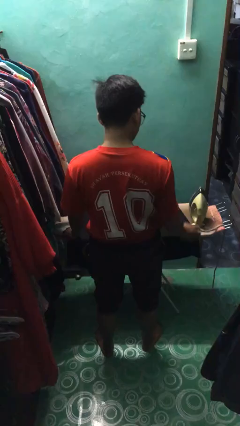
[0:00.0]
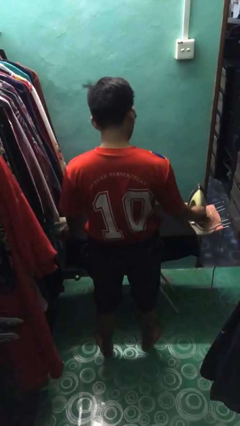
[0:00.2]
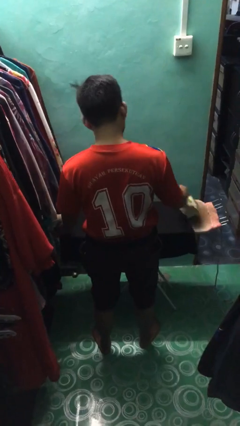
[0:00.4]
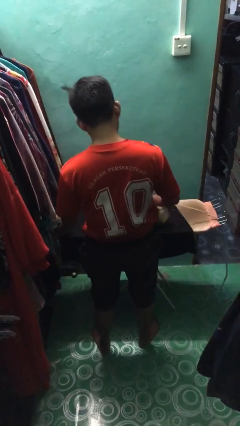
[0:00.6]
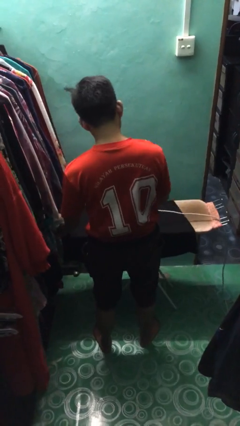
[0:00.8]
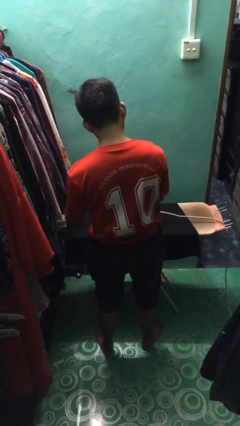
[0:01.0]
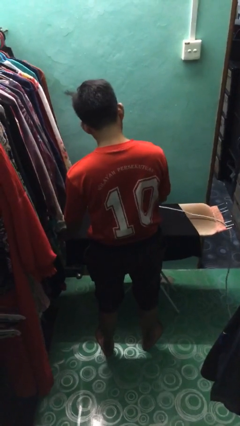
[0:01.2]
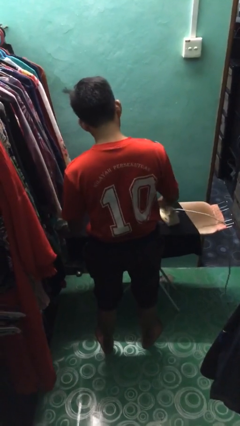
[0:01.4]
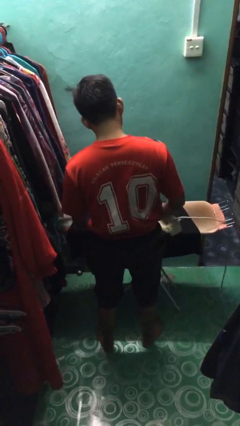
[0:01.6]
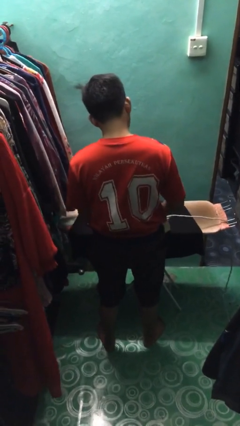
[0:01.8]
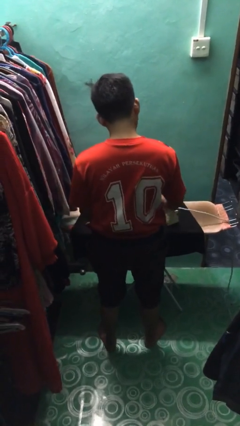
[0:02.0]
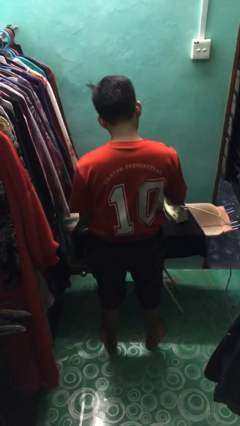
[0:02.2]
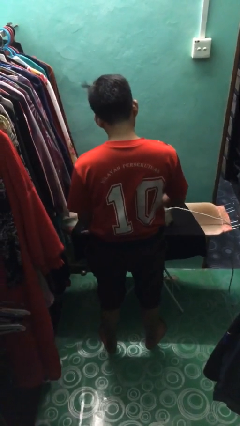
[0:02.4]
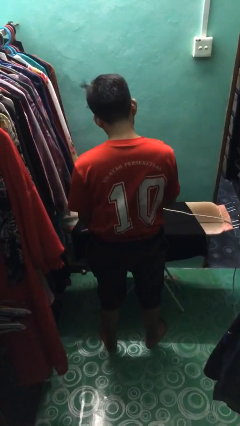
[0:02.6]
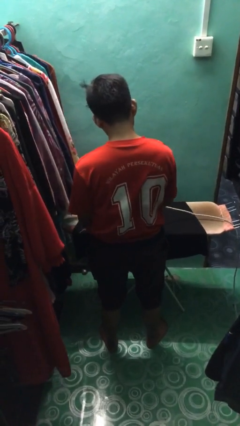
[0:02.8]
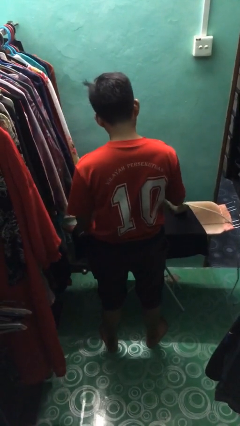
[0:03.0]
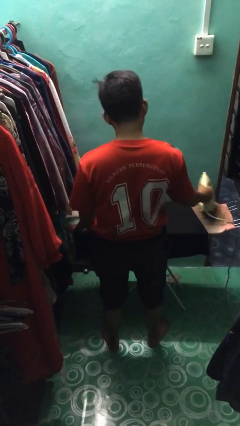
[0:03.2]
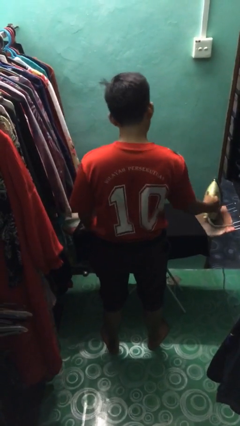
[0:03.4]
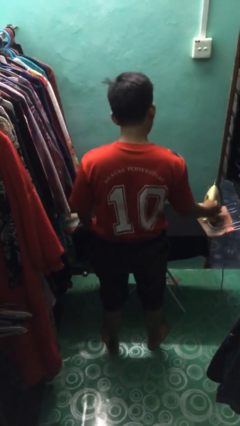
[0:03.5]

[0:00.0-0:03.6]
person irons clothes

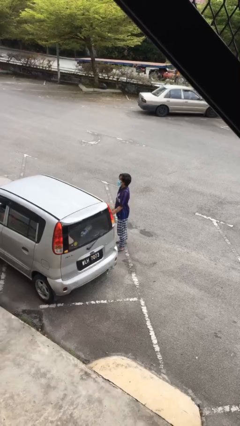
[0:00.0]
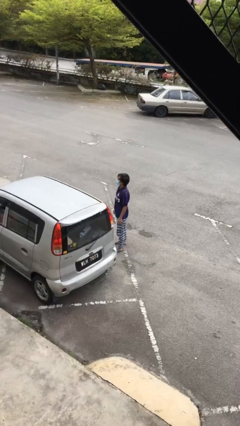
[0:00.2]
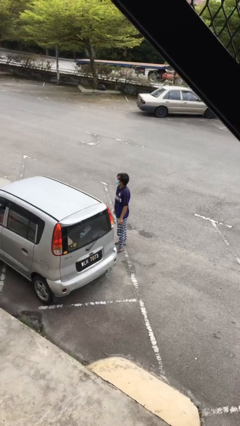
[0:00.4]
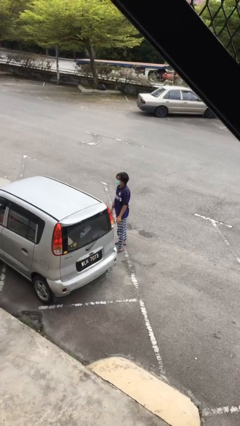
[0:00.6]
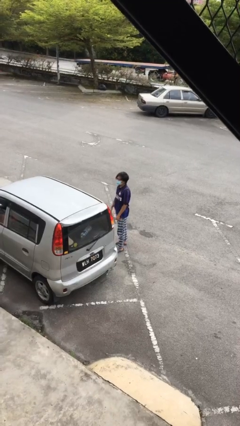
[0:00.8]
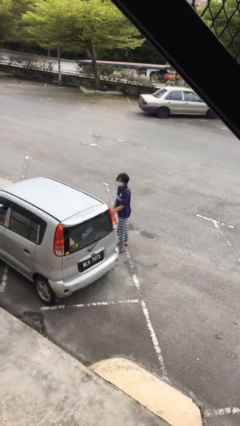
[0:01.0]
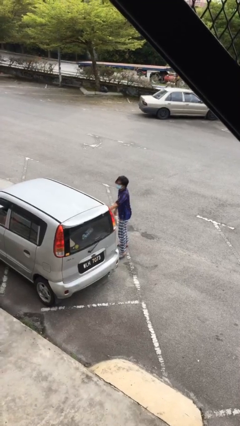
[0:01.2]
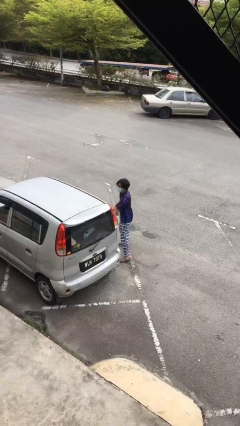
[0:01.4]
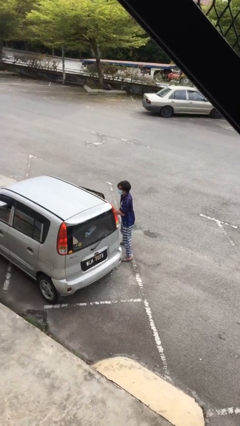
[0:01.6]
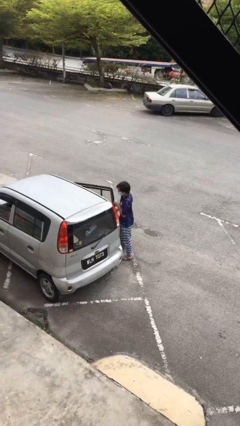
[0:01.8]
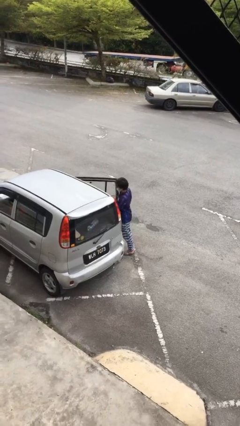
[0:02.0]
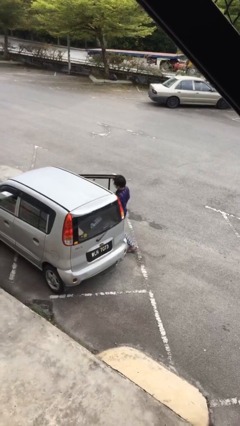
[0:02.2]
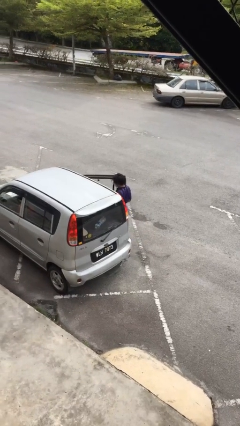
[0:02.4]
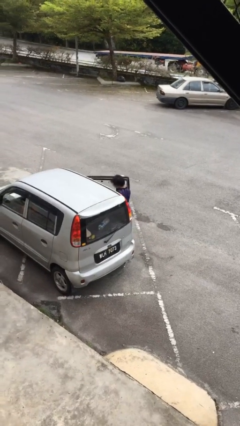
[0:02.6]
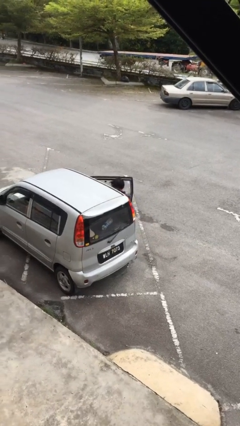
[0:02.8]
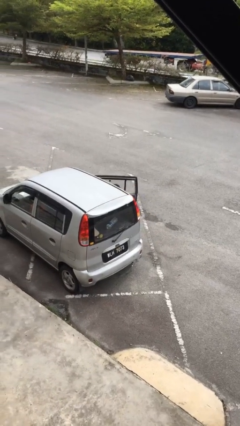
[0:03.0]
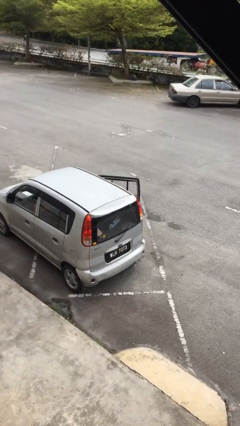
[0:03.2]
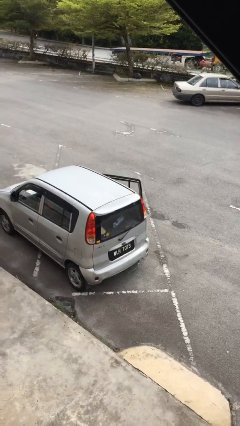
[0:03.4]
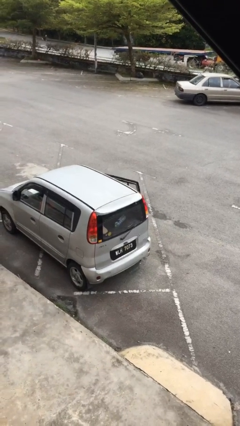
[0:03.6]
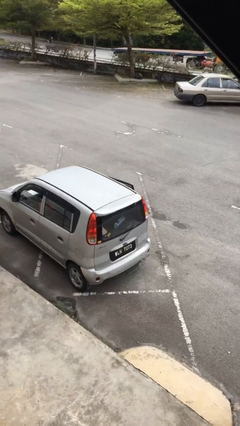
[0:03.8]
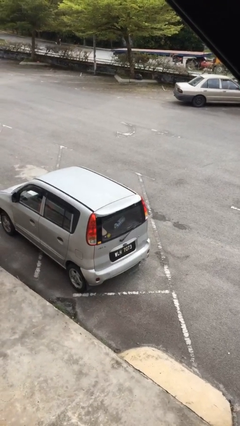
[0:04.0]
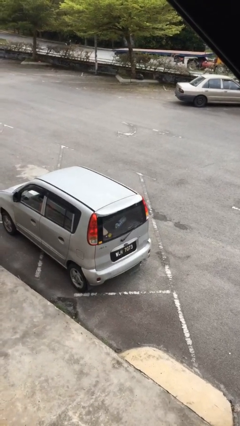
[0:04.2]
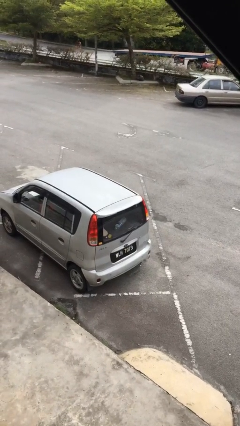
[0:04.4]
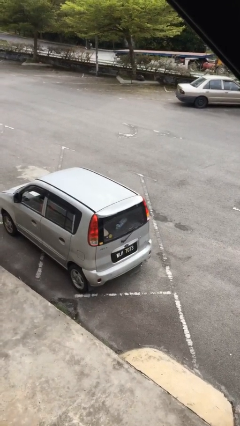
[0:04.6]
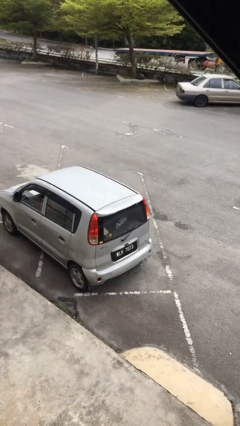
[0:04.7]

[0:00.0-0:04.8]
person enters car

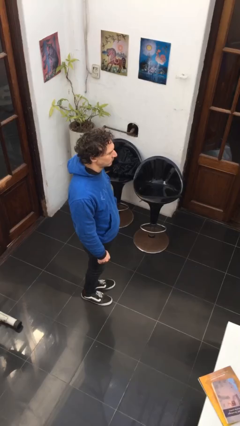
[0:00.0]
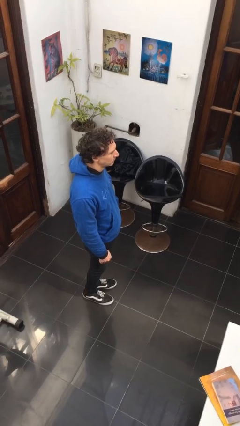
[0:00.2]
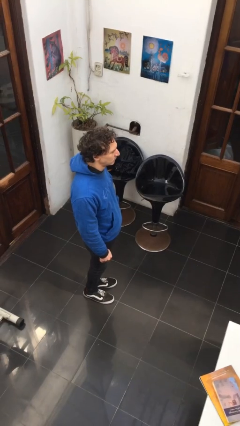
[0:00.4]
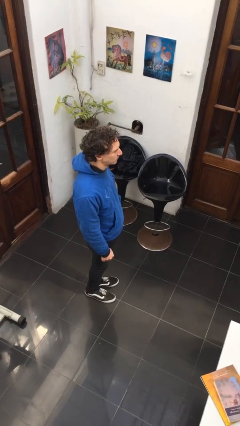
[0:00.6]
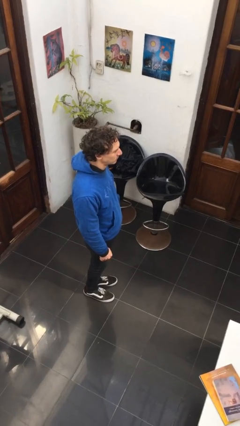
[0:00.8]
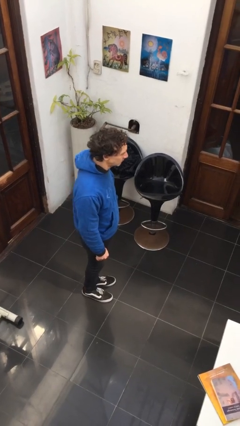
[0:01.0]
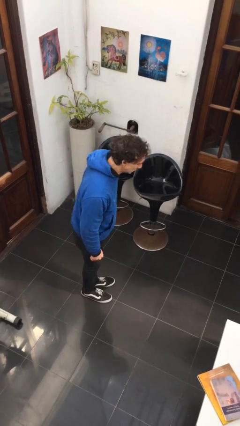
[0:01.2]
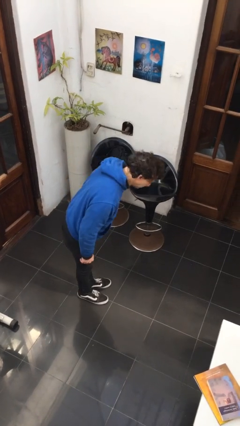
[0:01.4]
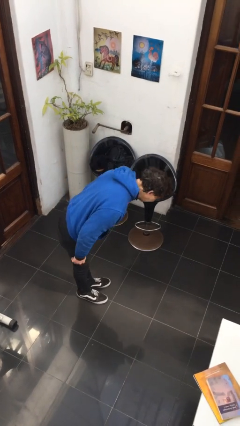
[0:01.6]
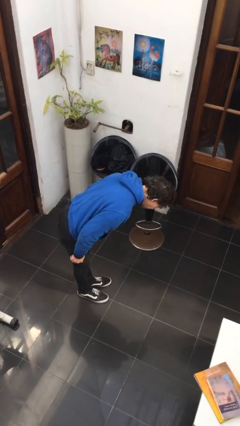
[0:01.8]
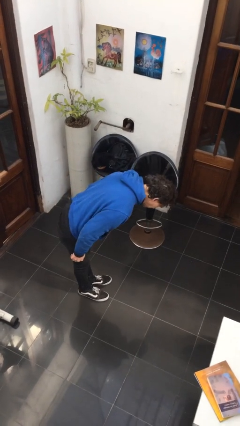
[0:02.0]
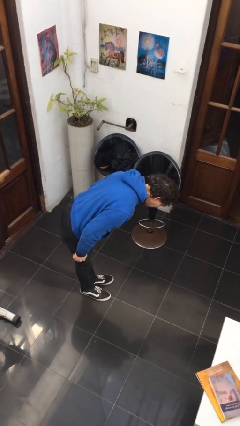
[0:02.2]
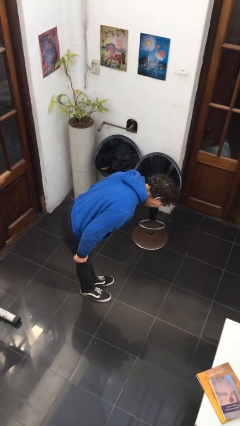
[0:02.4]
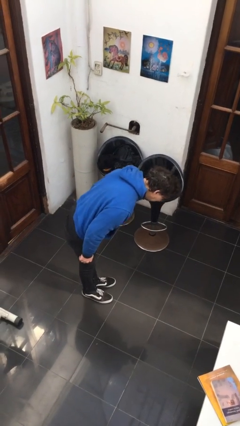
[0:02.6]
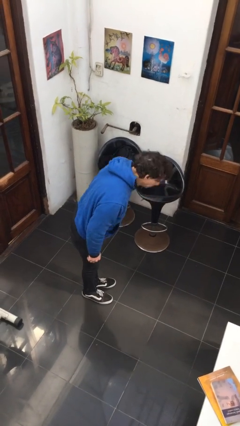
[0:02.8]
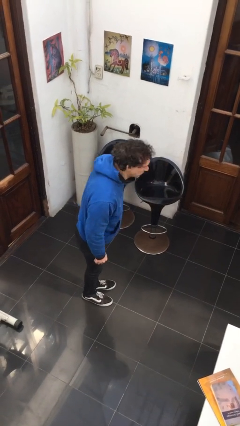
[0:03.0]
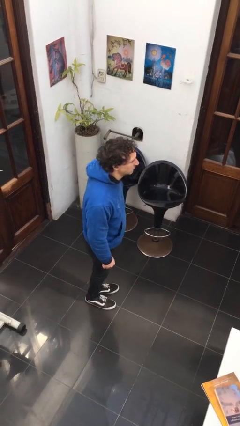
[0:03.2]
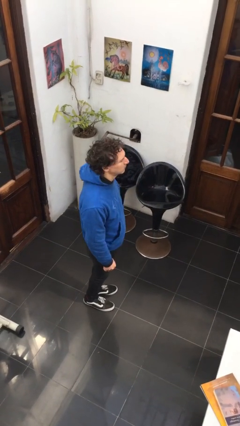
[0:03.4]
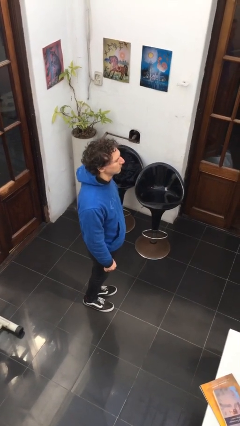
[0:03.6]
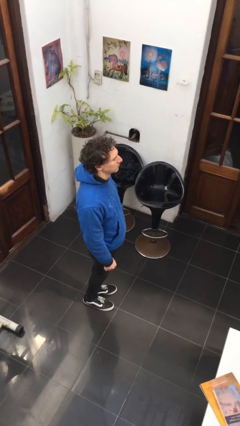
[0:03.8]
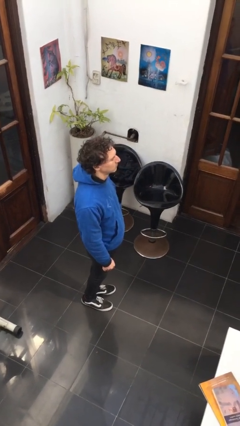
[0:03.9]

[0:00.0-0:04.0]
person bows

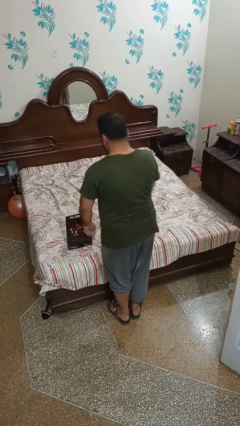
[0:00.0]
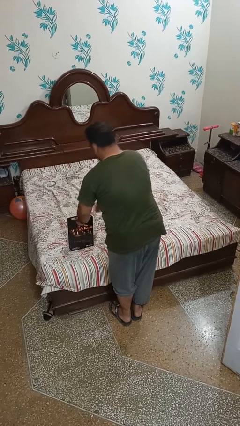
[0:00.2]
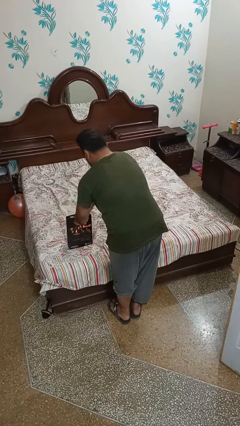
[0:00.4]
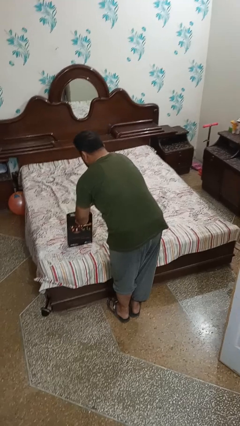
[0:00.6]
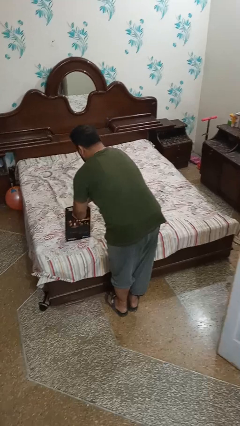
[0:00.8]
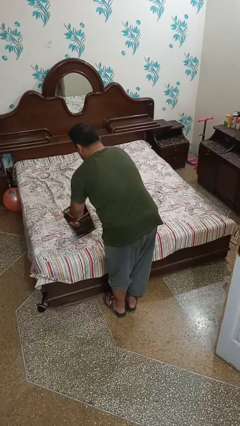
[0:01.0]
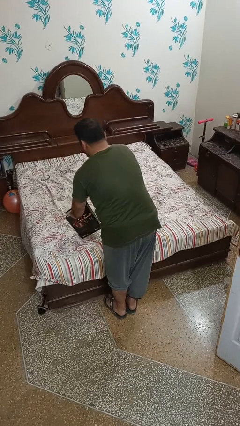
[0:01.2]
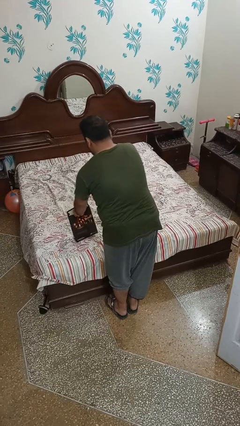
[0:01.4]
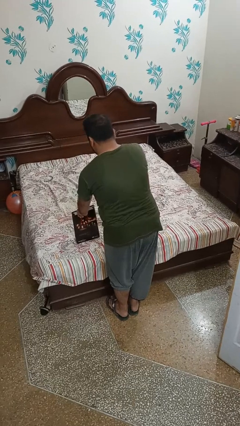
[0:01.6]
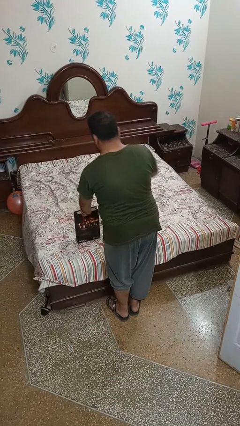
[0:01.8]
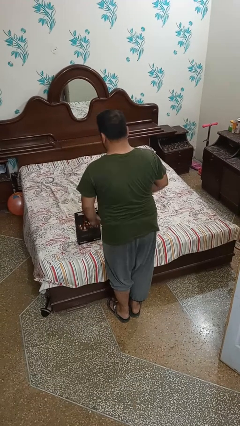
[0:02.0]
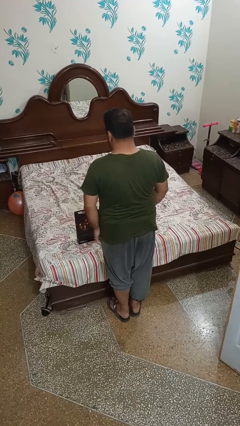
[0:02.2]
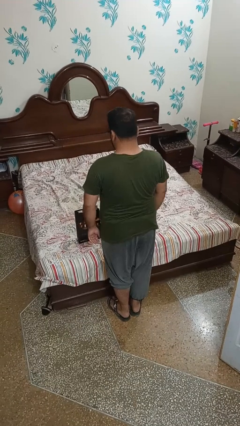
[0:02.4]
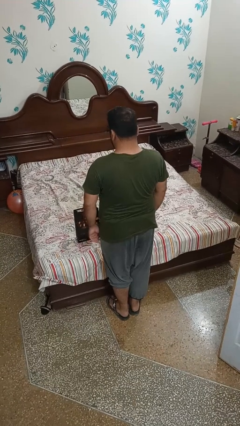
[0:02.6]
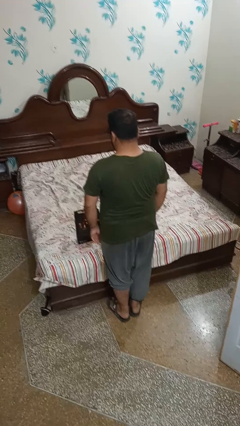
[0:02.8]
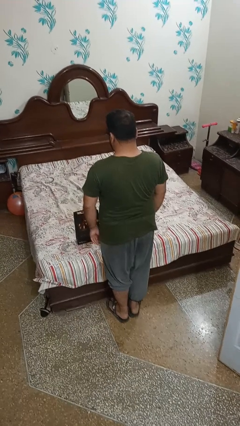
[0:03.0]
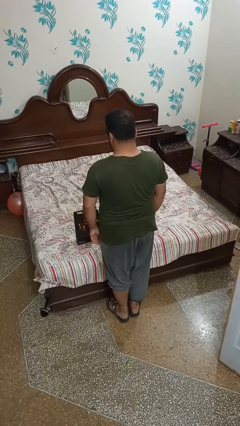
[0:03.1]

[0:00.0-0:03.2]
person takes object from bag

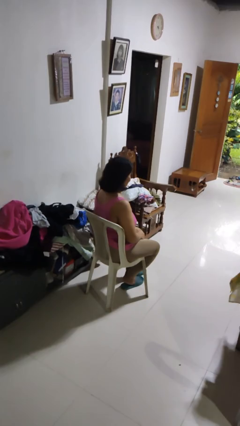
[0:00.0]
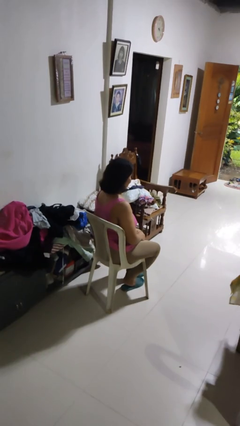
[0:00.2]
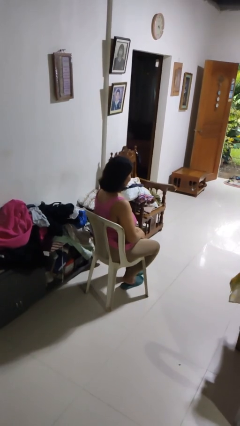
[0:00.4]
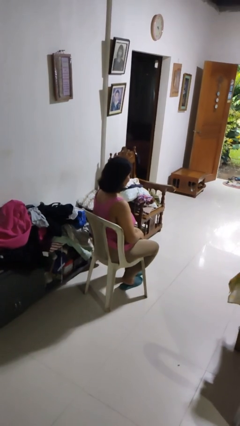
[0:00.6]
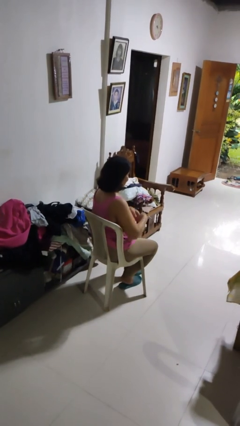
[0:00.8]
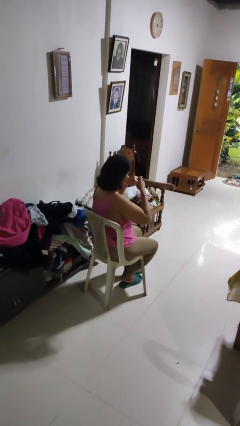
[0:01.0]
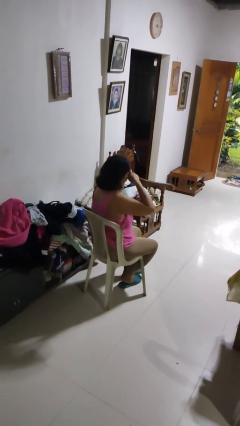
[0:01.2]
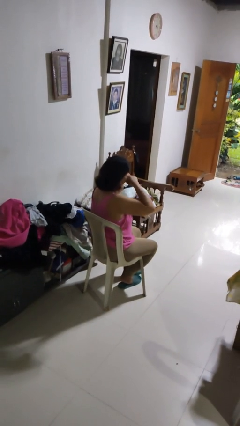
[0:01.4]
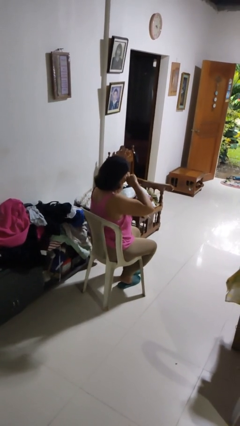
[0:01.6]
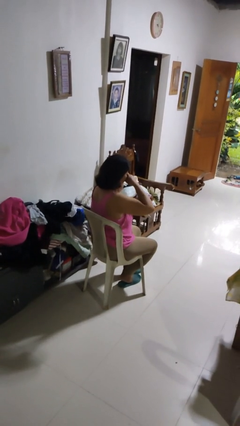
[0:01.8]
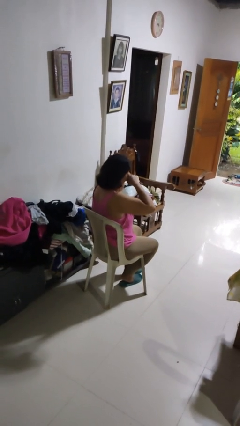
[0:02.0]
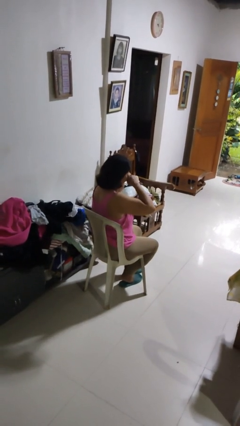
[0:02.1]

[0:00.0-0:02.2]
person rubs eyes
